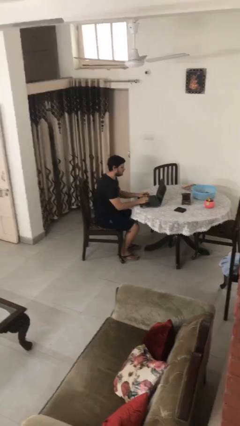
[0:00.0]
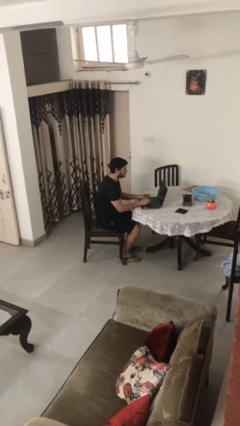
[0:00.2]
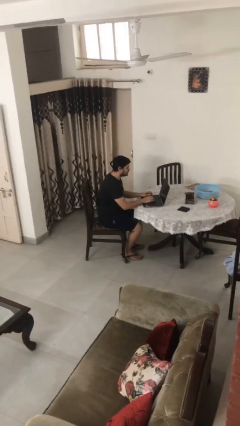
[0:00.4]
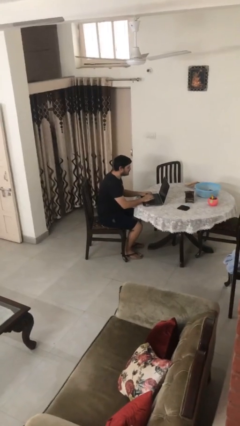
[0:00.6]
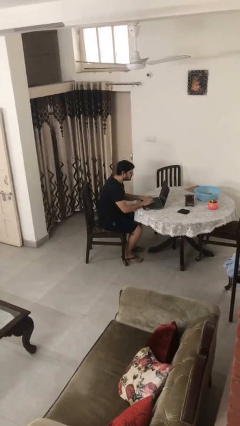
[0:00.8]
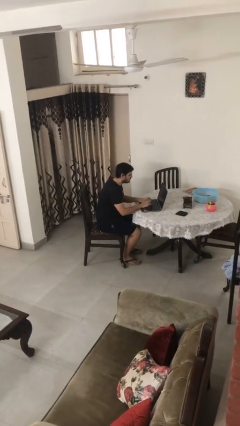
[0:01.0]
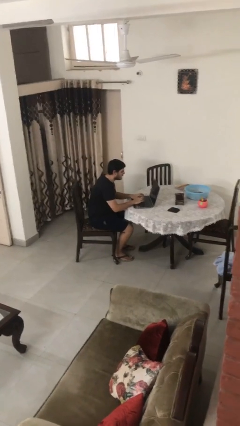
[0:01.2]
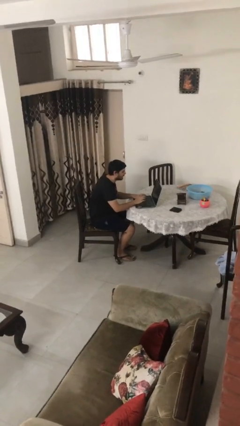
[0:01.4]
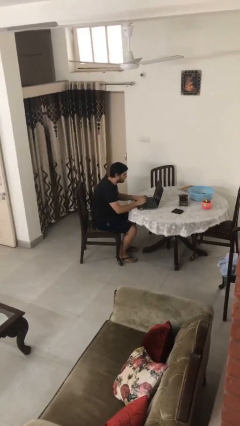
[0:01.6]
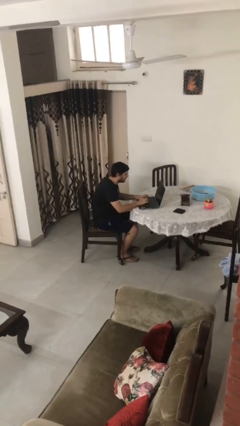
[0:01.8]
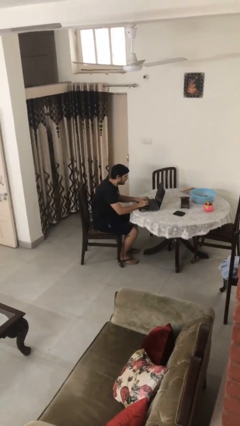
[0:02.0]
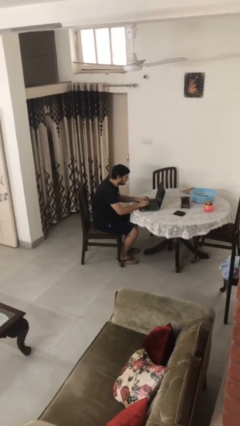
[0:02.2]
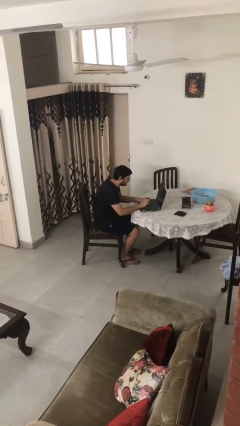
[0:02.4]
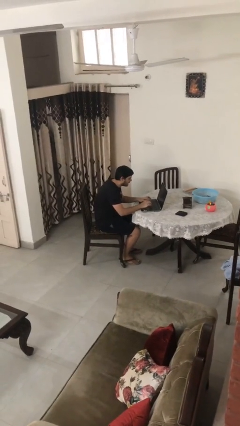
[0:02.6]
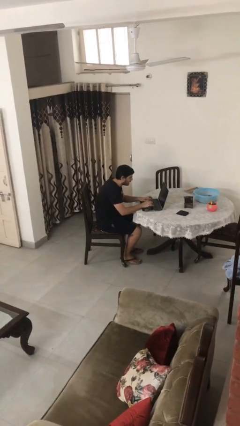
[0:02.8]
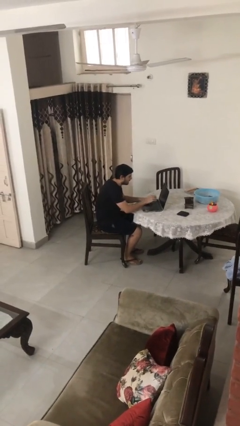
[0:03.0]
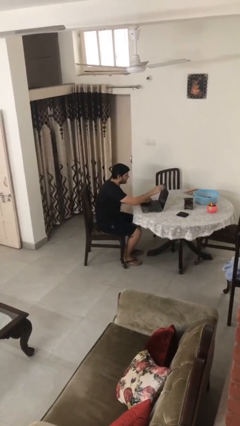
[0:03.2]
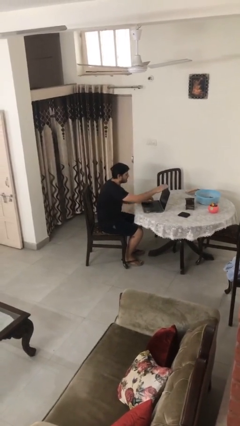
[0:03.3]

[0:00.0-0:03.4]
person interacts with laptop

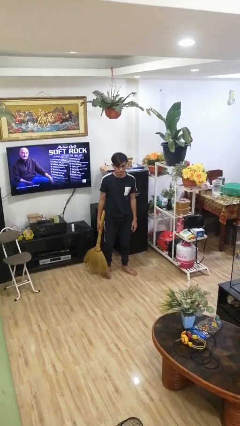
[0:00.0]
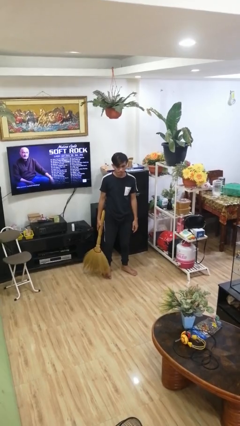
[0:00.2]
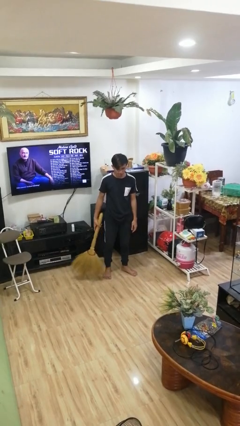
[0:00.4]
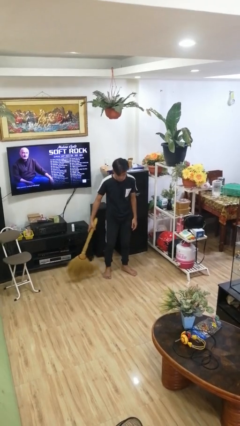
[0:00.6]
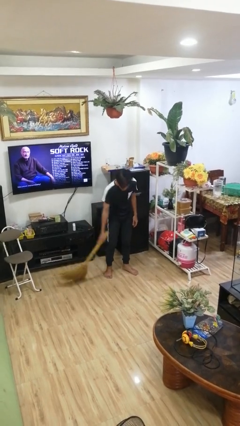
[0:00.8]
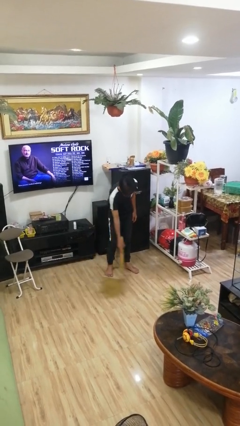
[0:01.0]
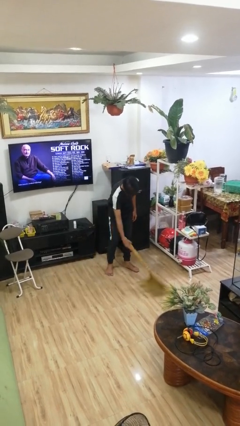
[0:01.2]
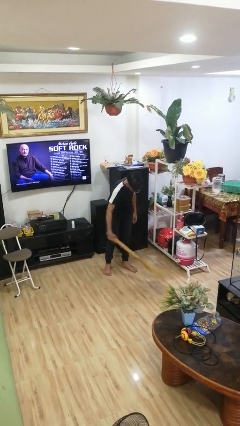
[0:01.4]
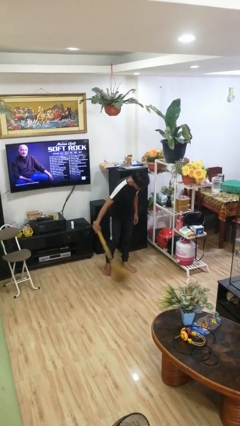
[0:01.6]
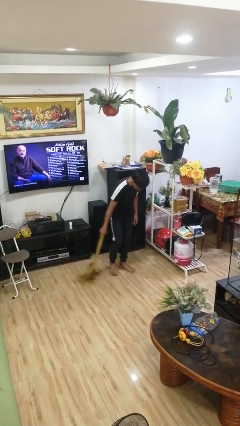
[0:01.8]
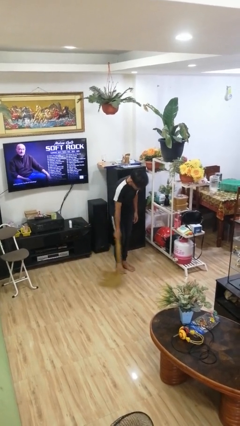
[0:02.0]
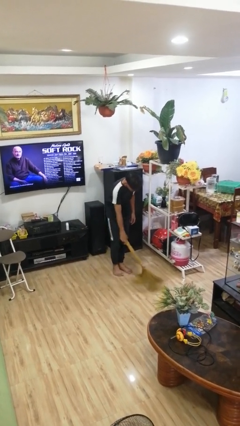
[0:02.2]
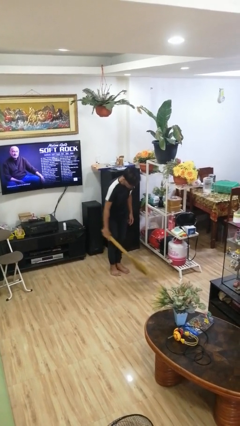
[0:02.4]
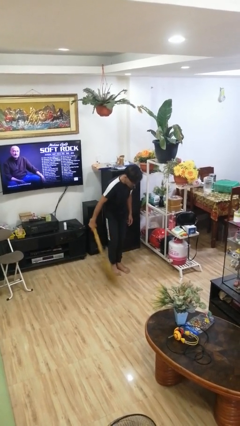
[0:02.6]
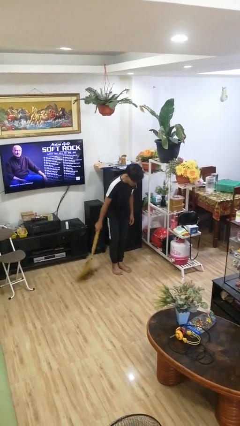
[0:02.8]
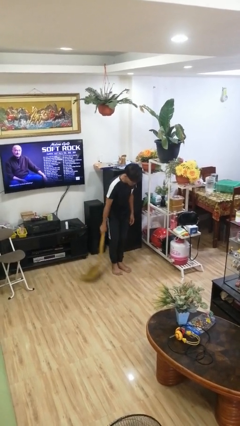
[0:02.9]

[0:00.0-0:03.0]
person sweeps floor

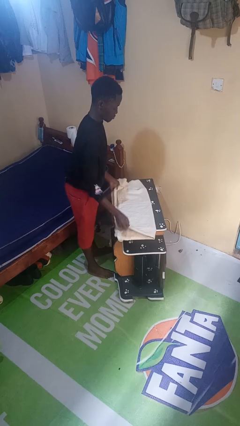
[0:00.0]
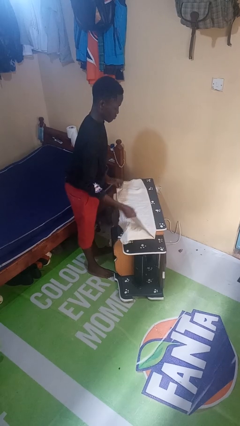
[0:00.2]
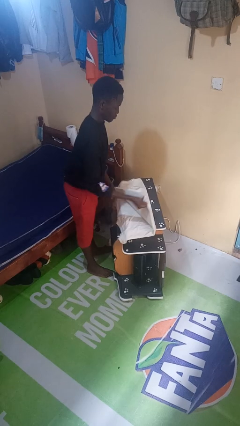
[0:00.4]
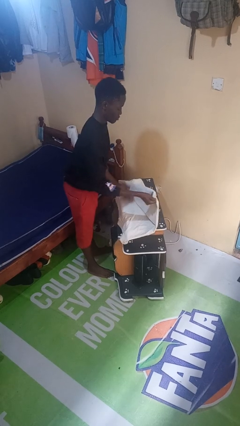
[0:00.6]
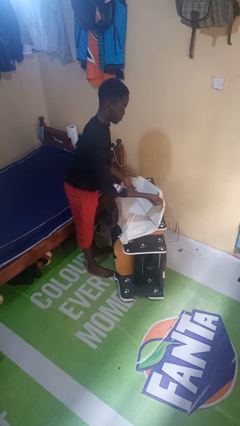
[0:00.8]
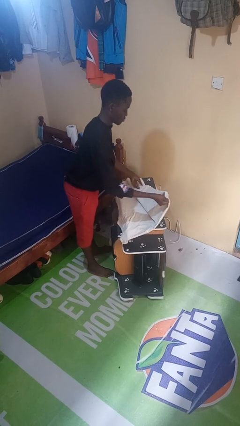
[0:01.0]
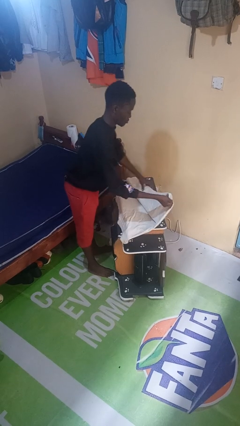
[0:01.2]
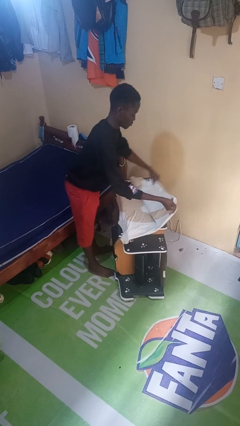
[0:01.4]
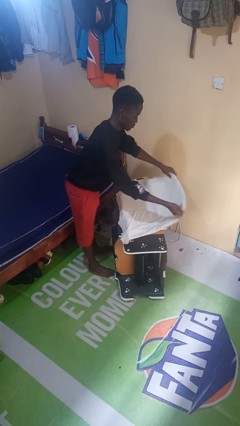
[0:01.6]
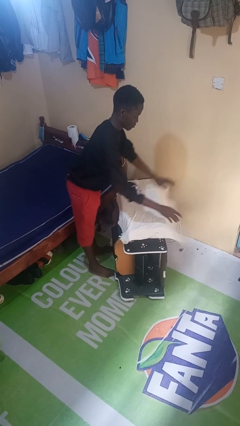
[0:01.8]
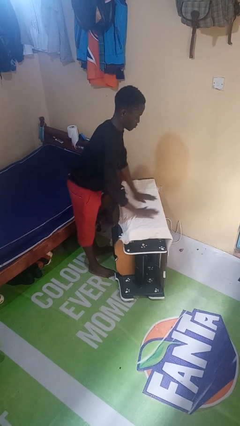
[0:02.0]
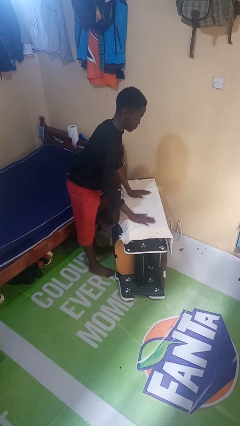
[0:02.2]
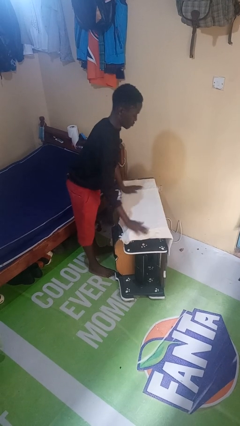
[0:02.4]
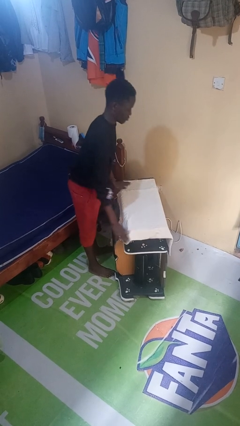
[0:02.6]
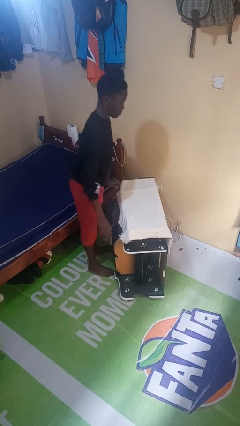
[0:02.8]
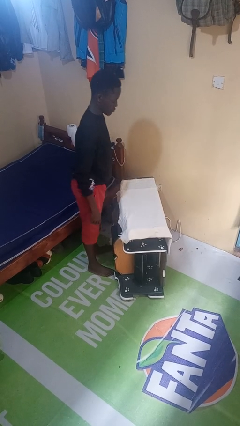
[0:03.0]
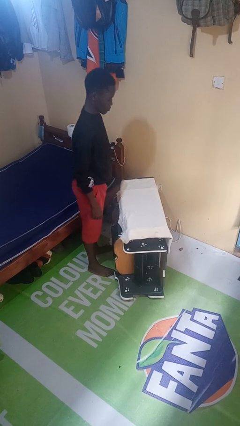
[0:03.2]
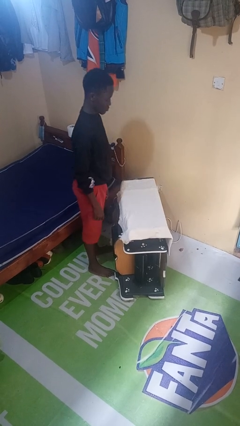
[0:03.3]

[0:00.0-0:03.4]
person spreads tablecloth

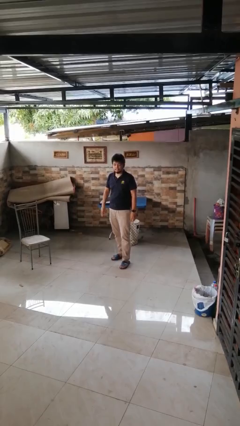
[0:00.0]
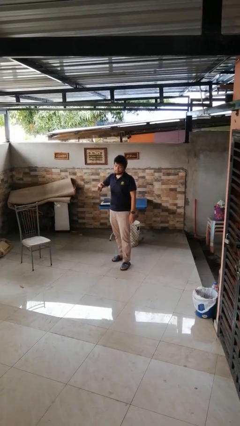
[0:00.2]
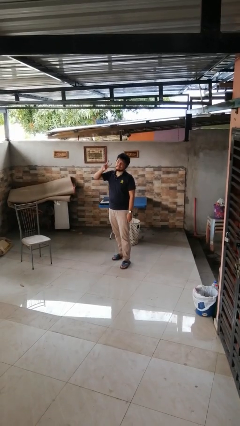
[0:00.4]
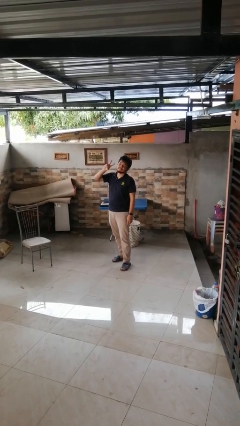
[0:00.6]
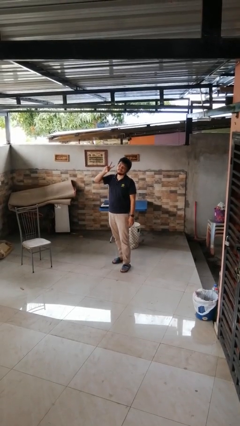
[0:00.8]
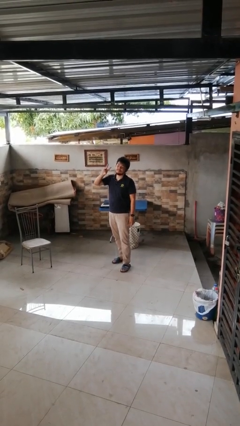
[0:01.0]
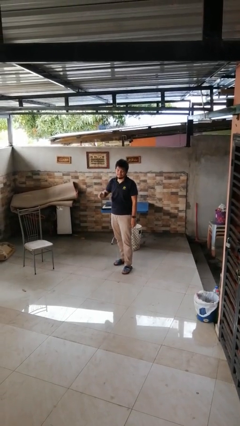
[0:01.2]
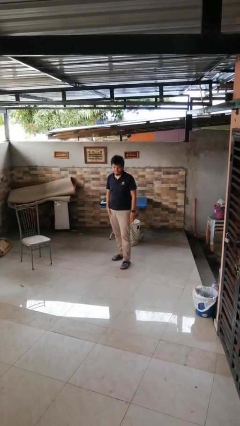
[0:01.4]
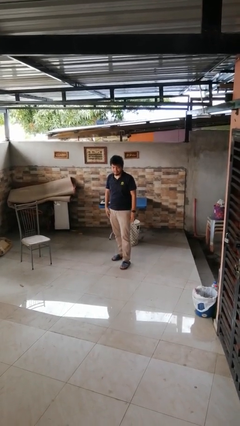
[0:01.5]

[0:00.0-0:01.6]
person gestures peace

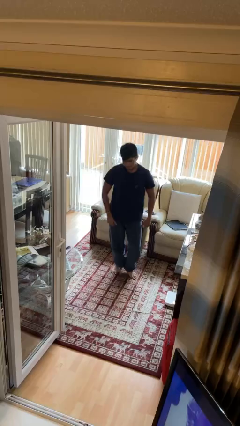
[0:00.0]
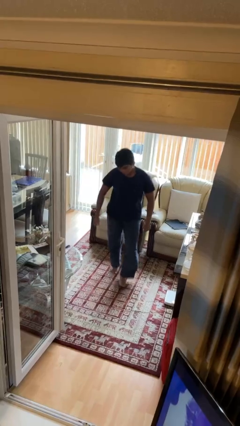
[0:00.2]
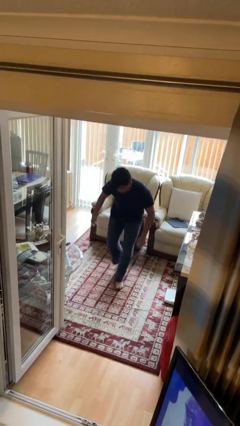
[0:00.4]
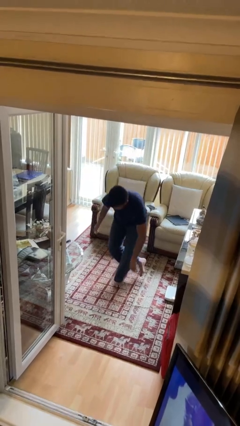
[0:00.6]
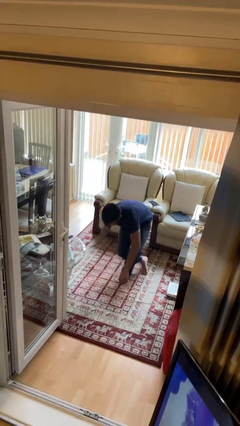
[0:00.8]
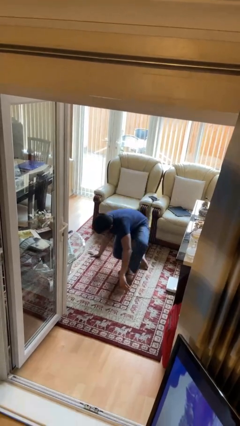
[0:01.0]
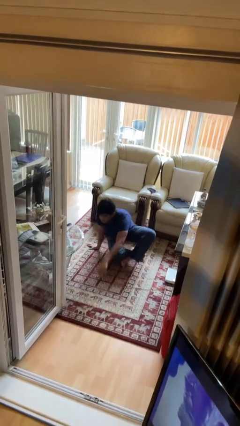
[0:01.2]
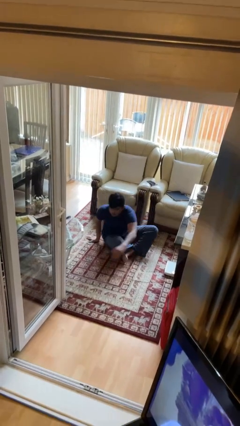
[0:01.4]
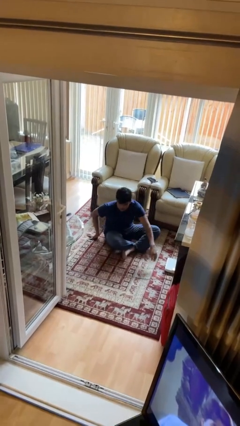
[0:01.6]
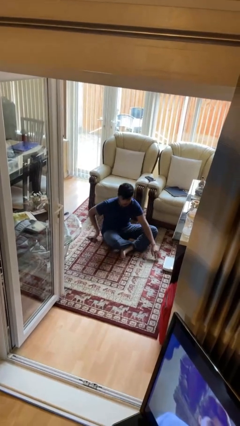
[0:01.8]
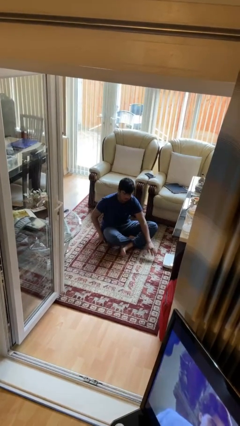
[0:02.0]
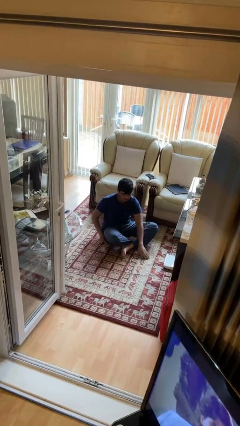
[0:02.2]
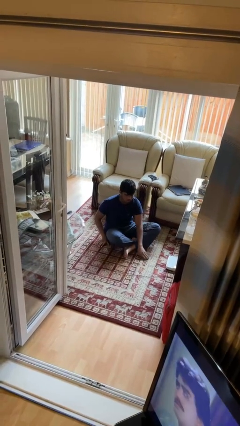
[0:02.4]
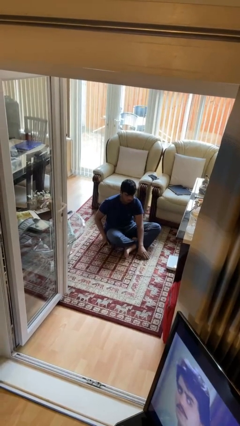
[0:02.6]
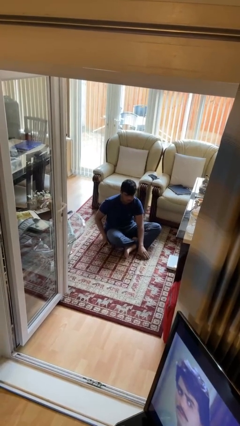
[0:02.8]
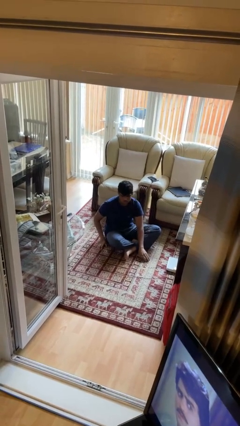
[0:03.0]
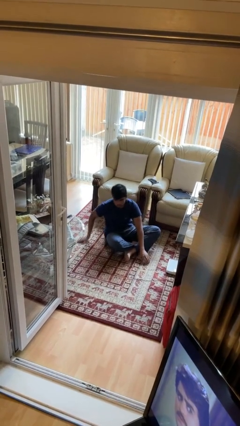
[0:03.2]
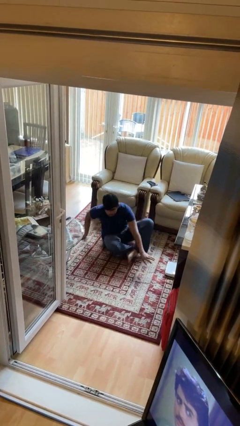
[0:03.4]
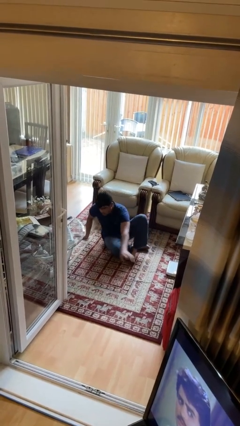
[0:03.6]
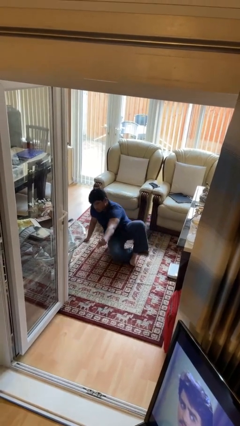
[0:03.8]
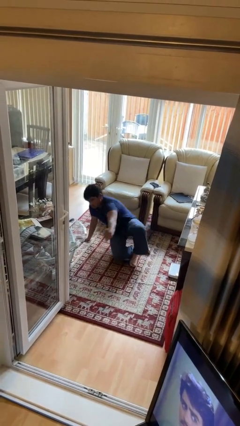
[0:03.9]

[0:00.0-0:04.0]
person sits crisscross

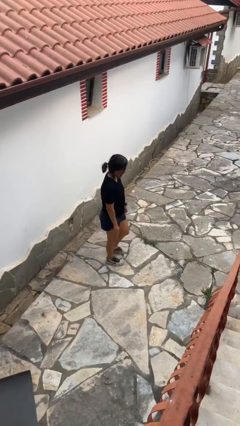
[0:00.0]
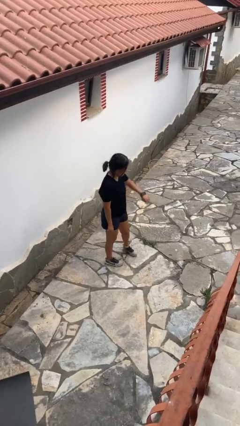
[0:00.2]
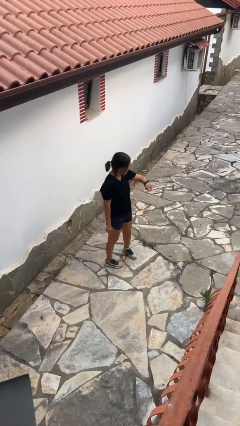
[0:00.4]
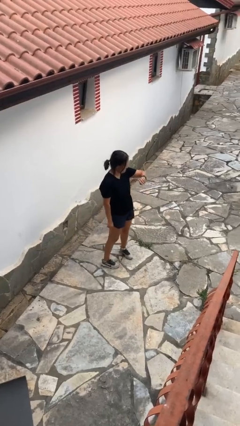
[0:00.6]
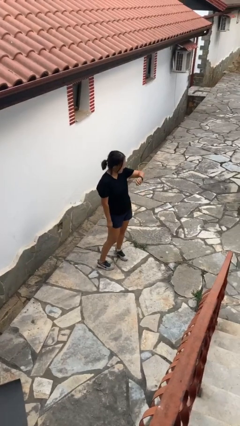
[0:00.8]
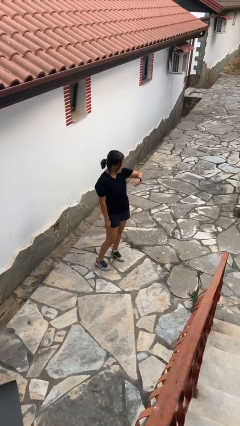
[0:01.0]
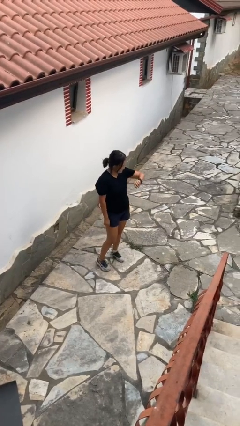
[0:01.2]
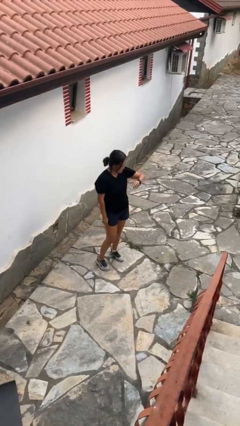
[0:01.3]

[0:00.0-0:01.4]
person looks at wristwatch

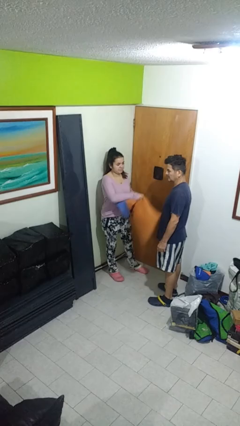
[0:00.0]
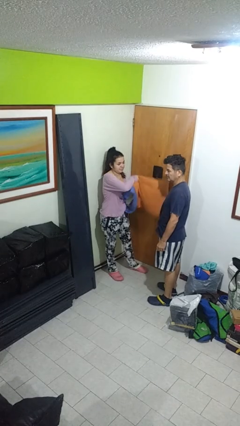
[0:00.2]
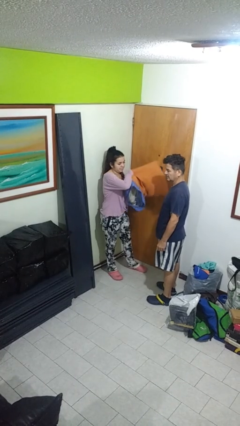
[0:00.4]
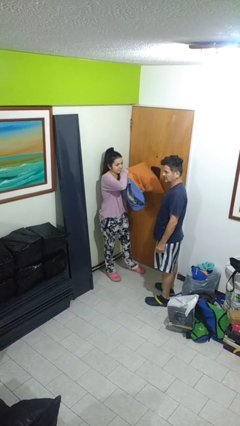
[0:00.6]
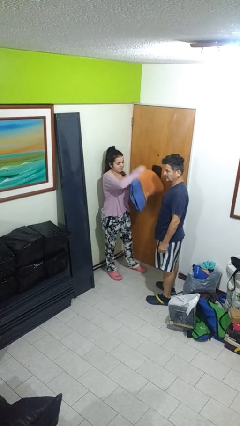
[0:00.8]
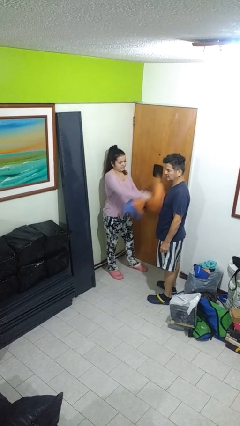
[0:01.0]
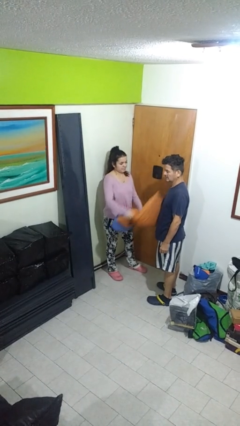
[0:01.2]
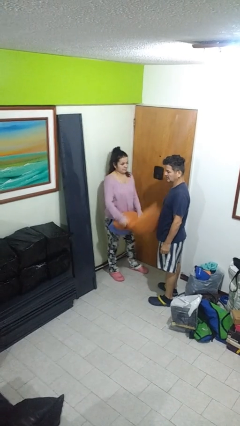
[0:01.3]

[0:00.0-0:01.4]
person hits person with pillow
